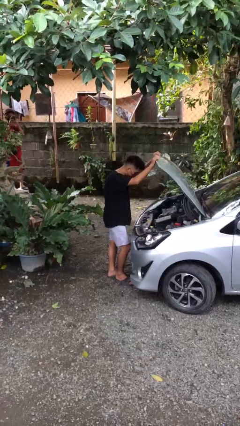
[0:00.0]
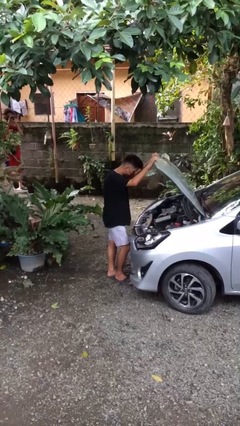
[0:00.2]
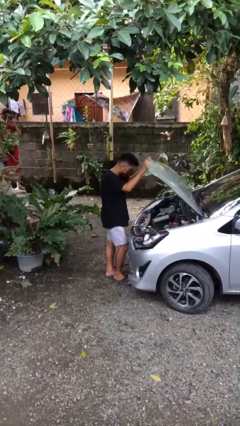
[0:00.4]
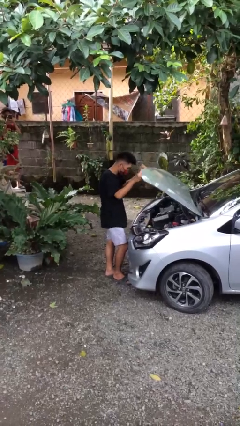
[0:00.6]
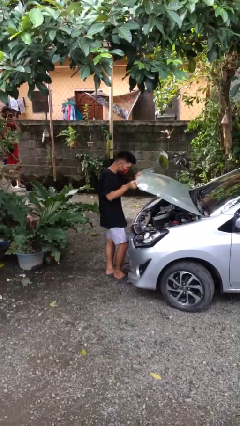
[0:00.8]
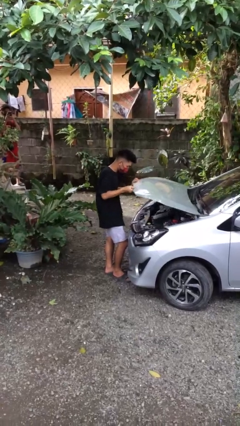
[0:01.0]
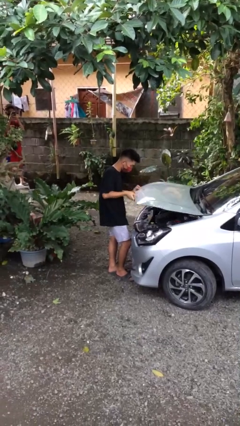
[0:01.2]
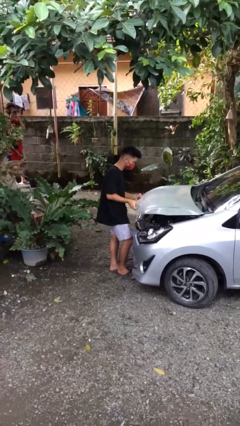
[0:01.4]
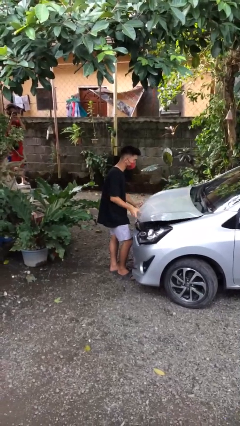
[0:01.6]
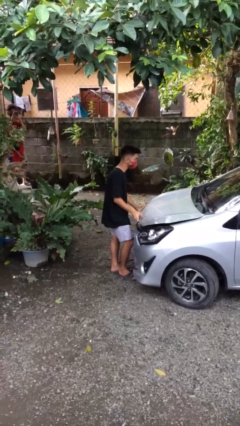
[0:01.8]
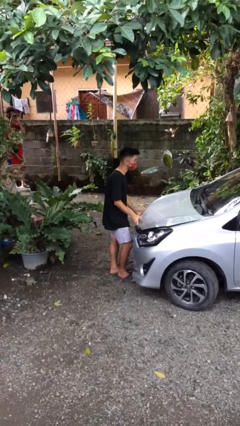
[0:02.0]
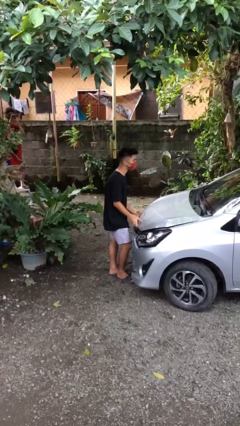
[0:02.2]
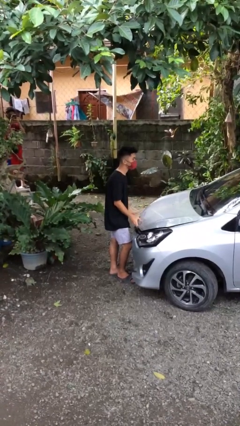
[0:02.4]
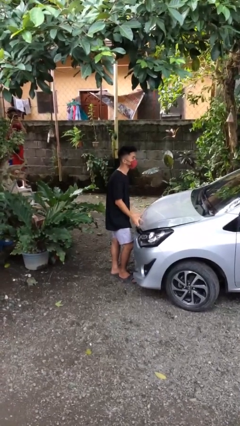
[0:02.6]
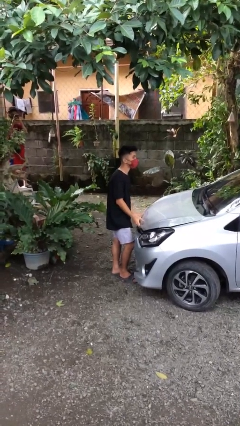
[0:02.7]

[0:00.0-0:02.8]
person closes car hood

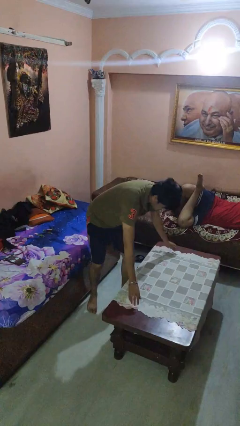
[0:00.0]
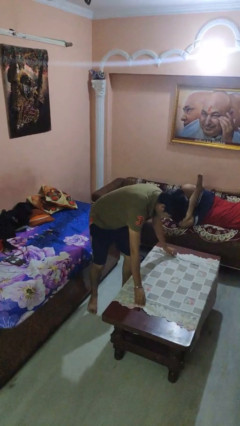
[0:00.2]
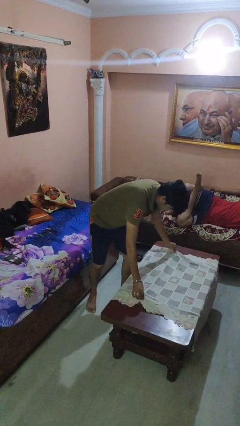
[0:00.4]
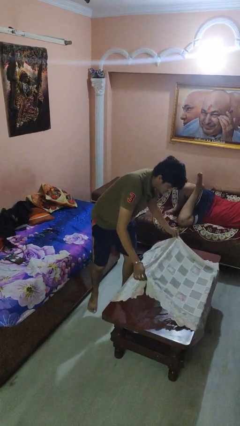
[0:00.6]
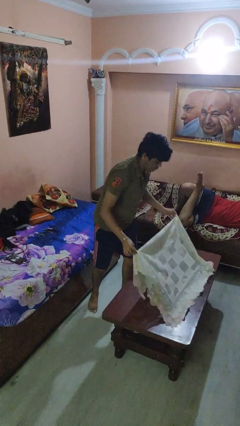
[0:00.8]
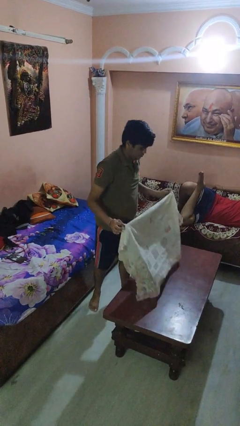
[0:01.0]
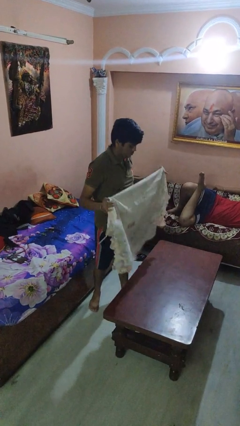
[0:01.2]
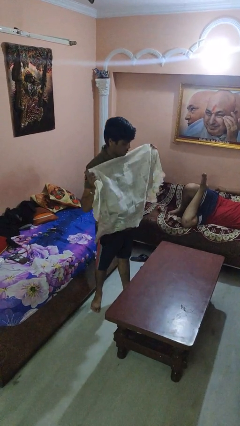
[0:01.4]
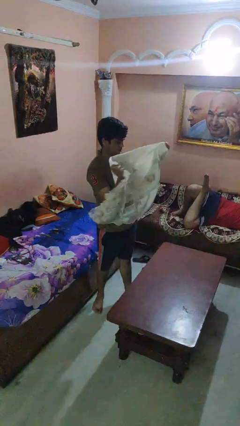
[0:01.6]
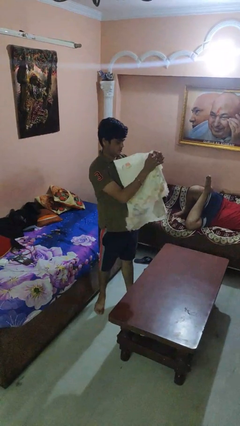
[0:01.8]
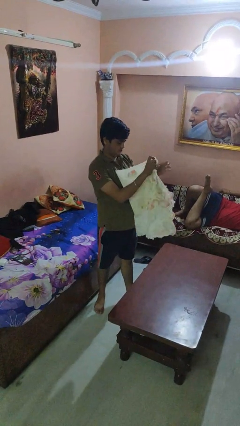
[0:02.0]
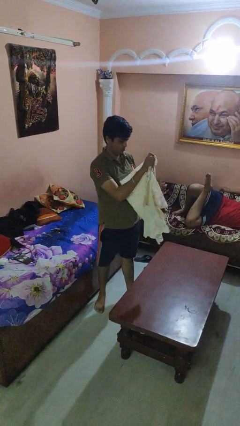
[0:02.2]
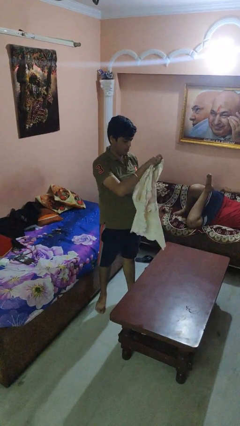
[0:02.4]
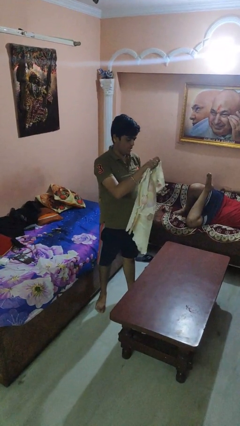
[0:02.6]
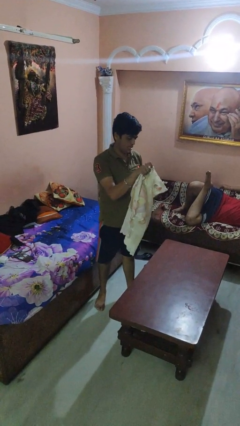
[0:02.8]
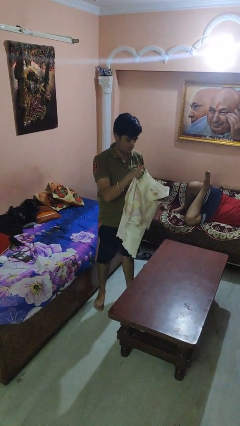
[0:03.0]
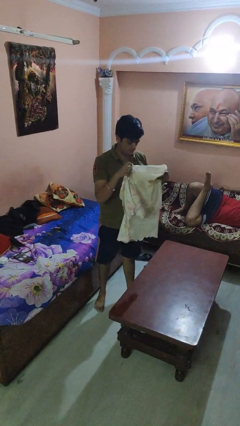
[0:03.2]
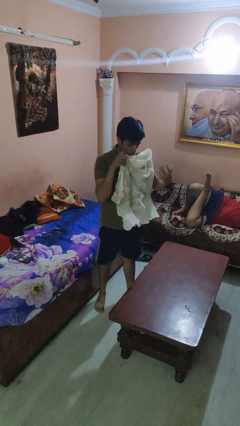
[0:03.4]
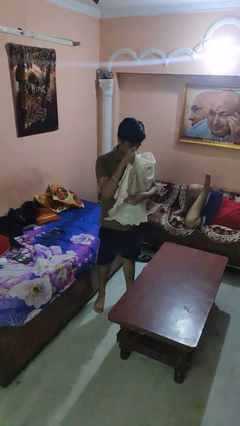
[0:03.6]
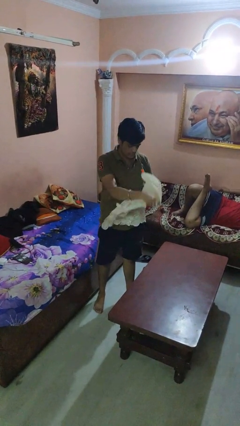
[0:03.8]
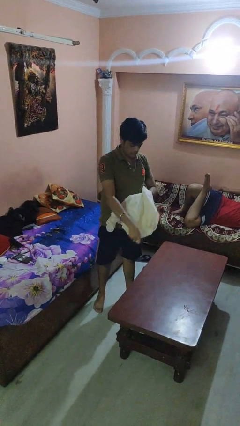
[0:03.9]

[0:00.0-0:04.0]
person folds tablecloth

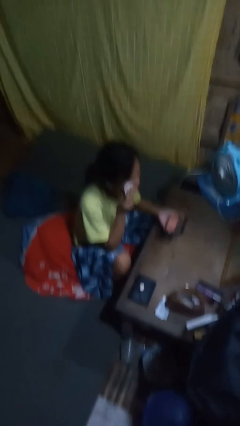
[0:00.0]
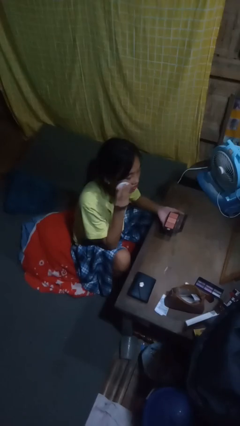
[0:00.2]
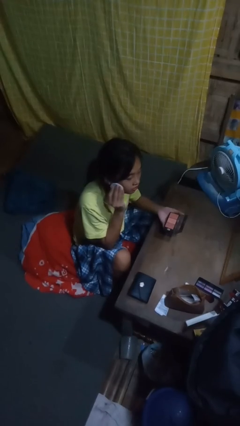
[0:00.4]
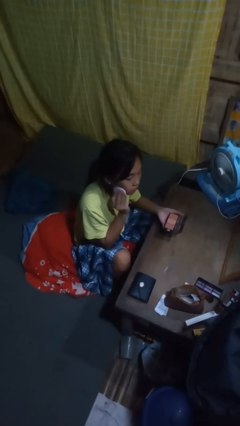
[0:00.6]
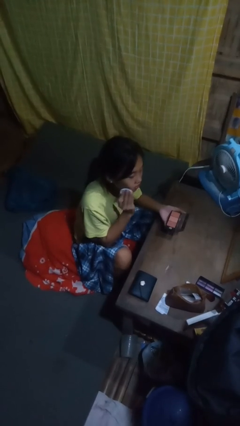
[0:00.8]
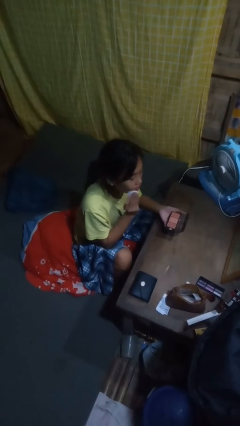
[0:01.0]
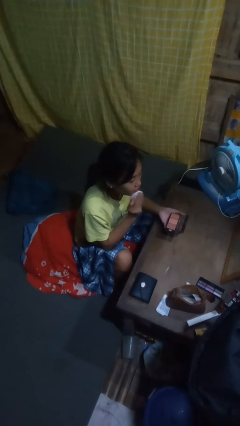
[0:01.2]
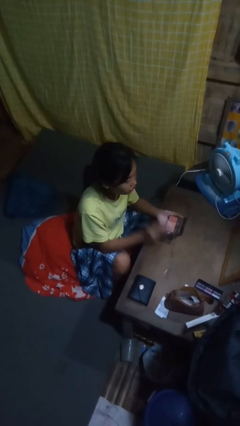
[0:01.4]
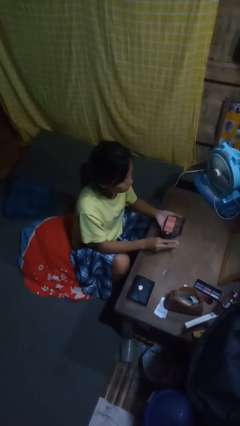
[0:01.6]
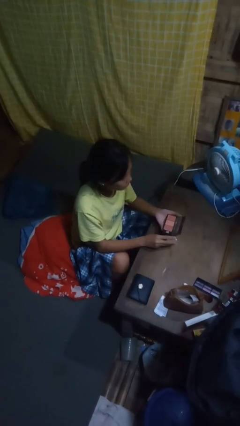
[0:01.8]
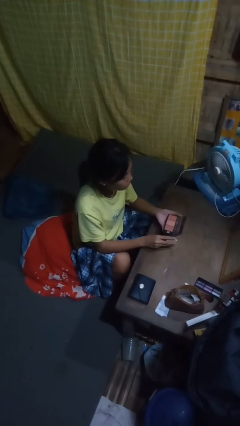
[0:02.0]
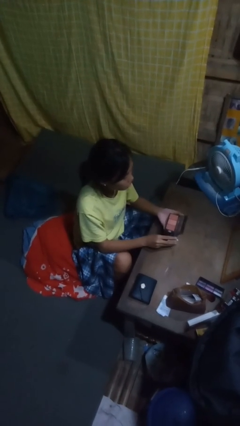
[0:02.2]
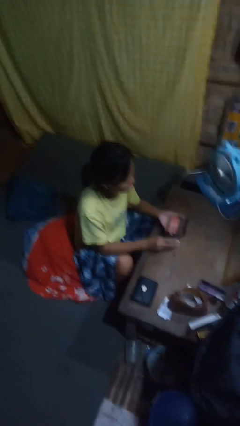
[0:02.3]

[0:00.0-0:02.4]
person applies foundation makeup

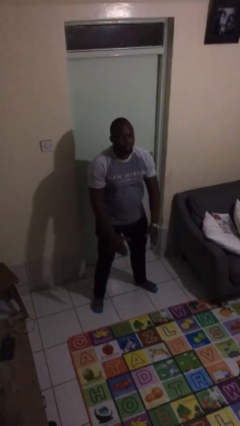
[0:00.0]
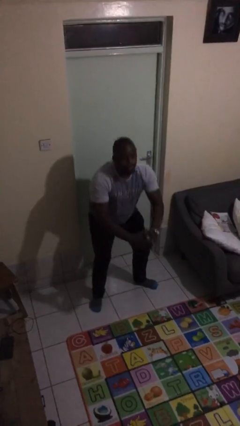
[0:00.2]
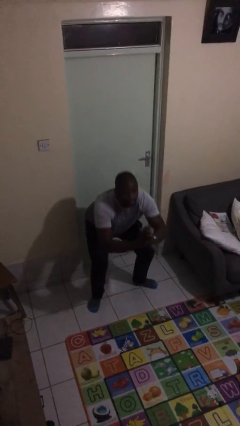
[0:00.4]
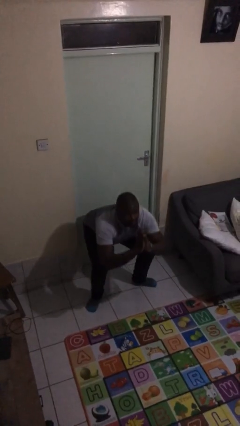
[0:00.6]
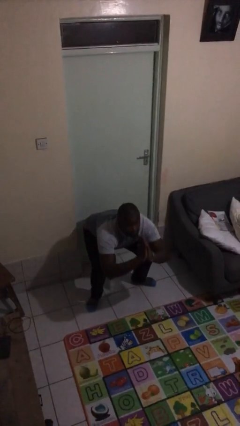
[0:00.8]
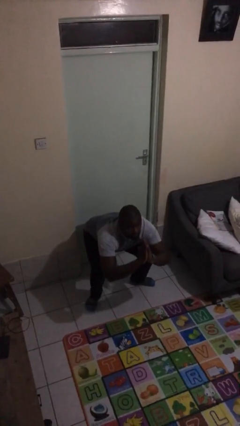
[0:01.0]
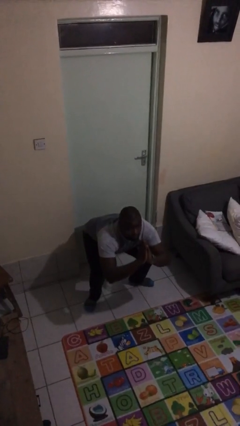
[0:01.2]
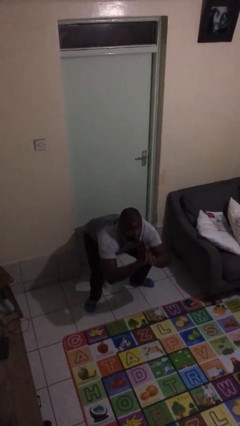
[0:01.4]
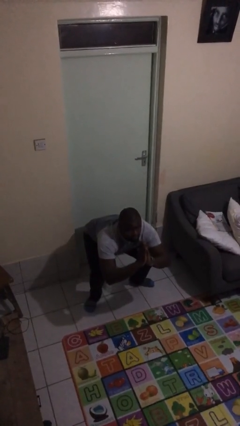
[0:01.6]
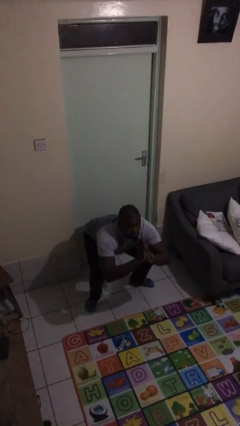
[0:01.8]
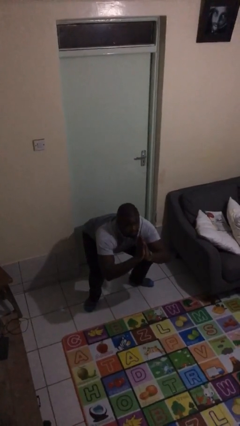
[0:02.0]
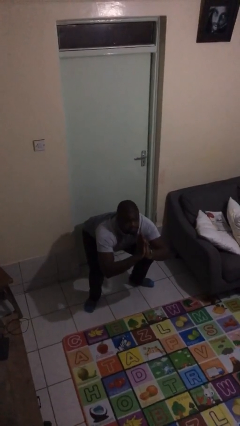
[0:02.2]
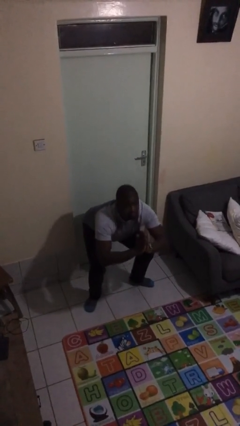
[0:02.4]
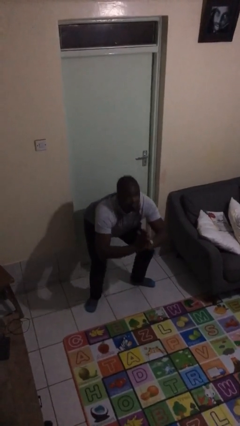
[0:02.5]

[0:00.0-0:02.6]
person squats

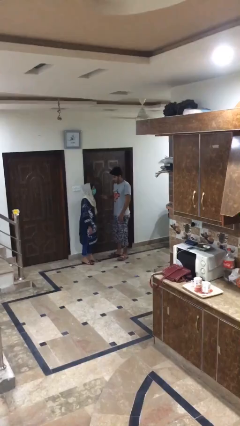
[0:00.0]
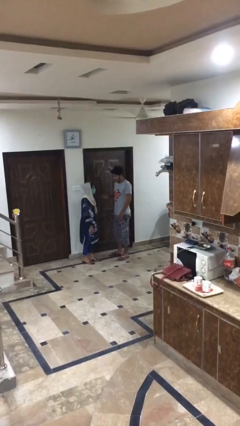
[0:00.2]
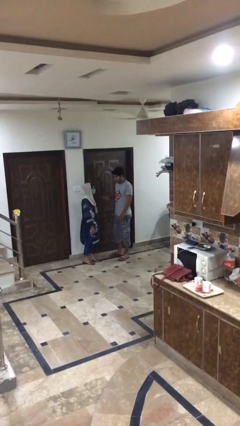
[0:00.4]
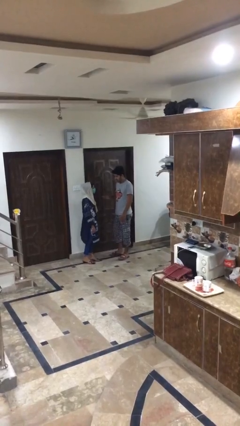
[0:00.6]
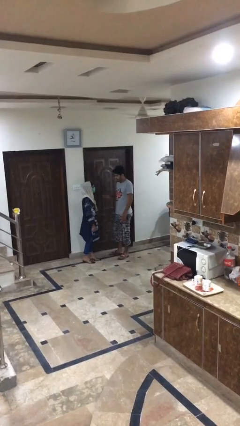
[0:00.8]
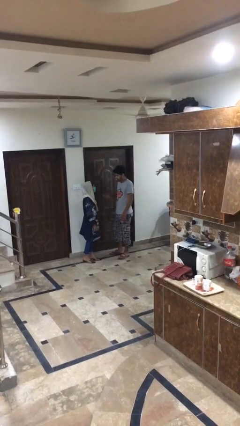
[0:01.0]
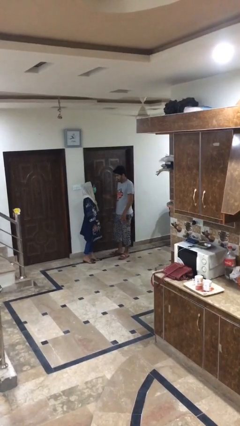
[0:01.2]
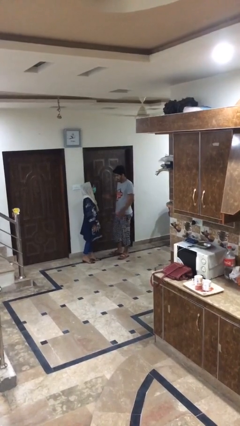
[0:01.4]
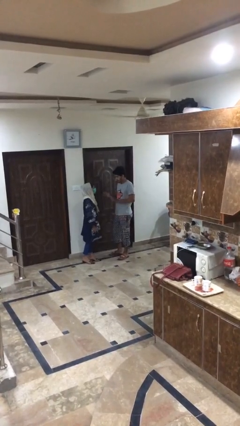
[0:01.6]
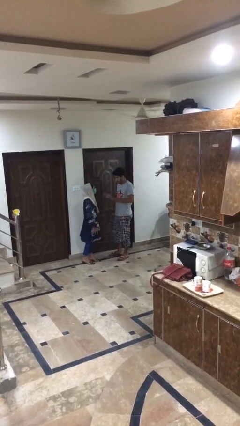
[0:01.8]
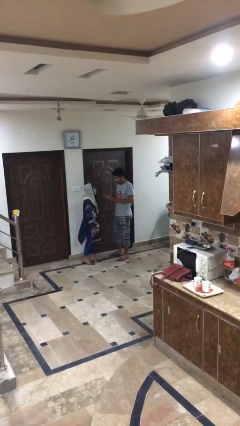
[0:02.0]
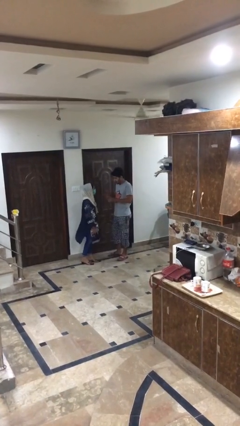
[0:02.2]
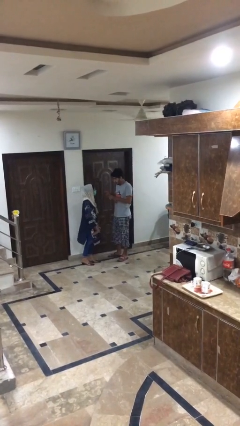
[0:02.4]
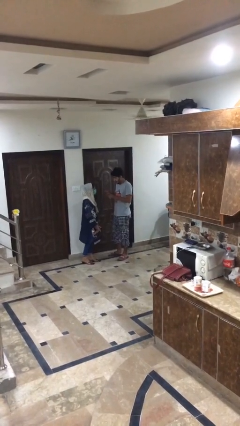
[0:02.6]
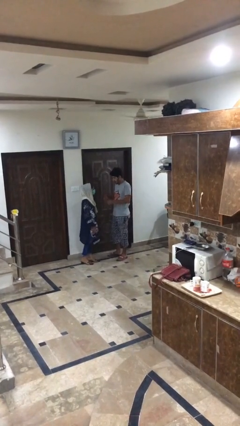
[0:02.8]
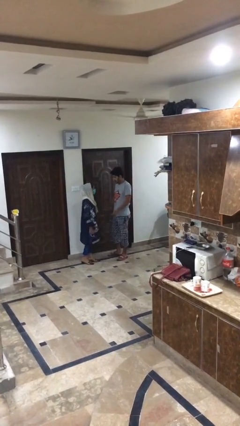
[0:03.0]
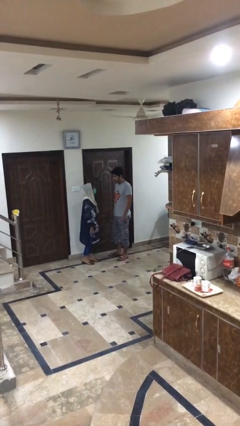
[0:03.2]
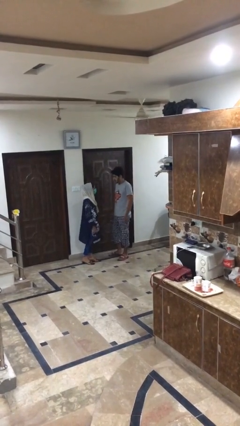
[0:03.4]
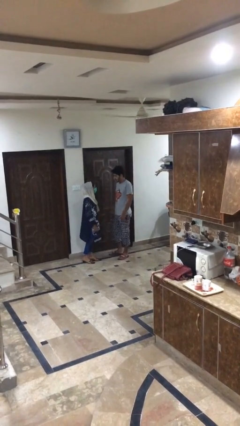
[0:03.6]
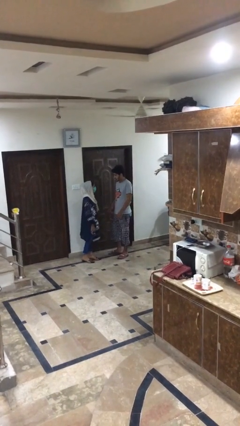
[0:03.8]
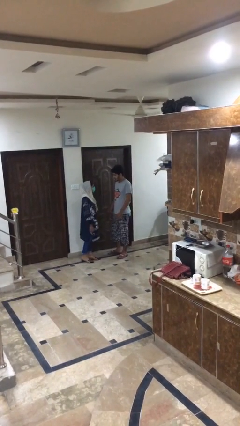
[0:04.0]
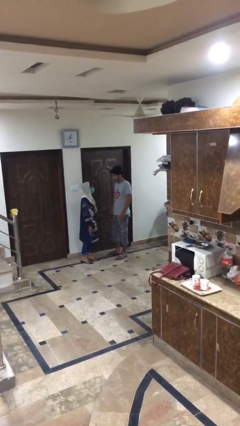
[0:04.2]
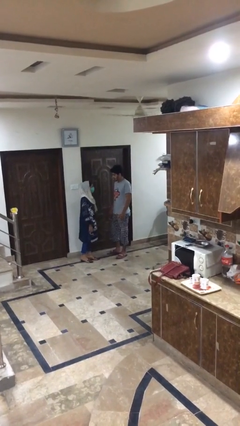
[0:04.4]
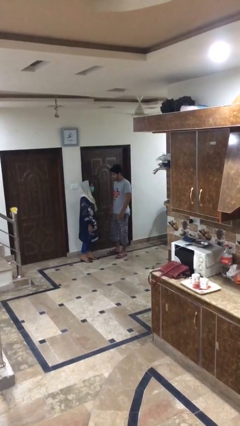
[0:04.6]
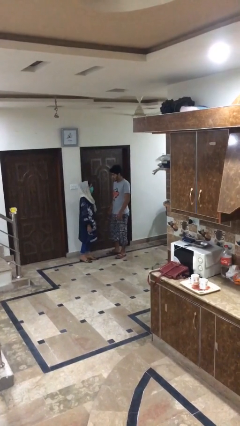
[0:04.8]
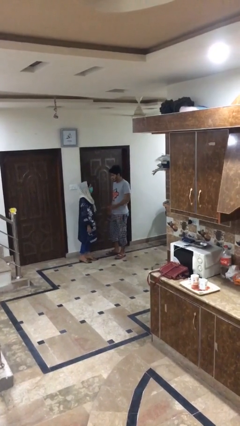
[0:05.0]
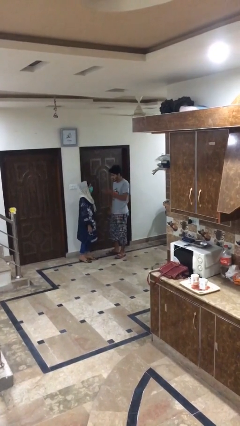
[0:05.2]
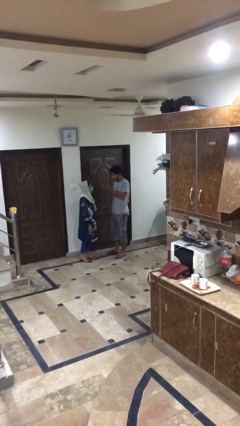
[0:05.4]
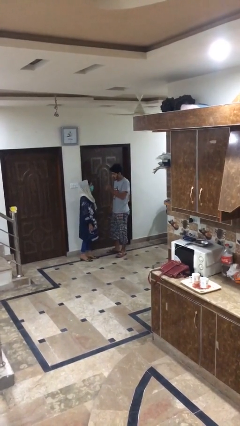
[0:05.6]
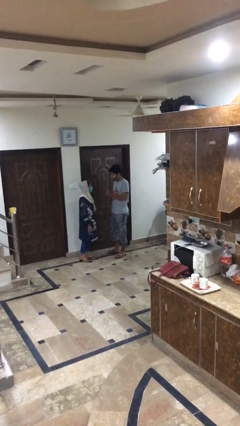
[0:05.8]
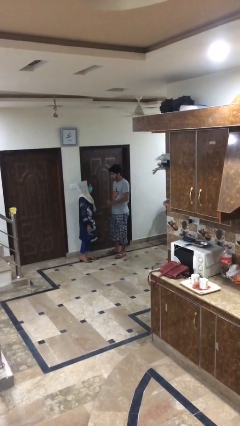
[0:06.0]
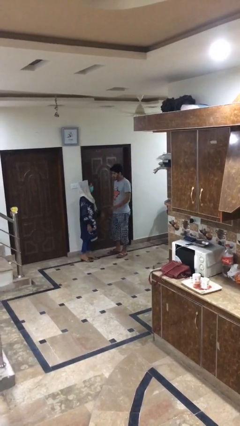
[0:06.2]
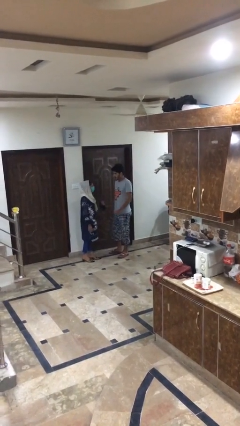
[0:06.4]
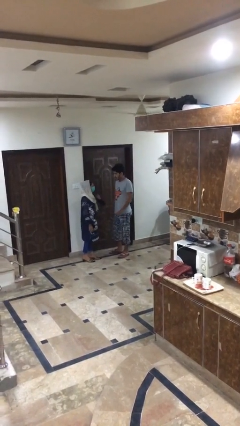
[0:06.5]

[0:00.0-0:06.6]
person talks to person
